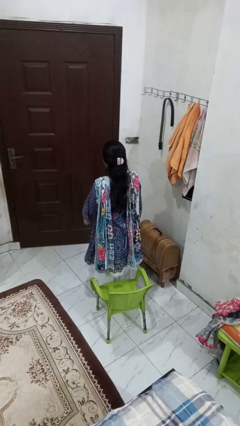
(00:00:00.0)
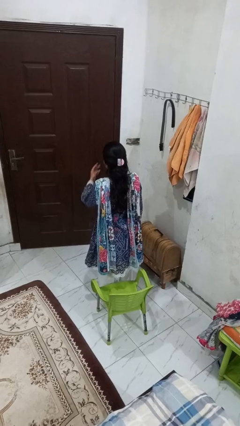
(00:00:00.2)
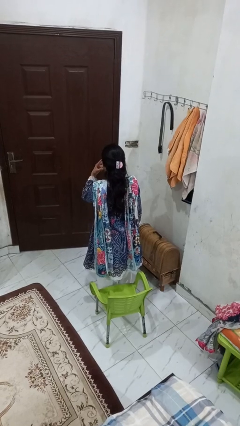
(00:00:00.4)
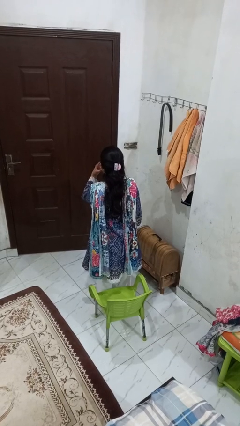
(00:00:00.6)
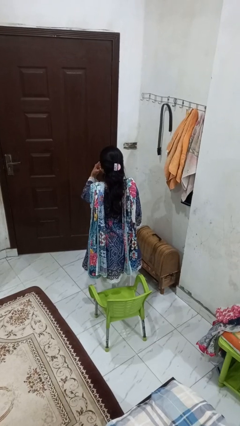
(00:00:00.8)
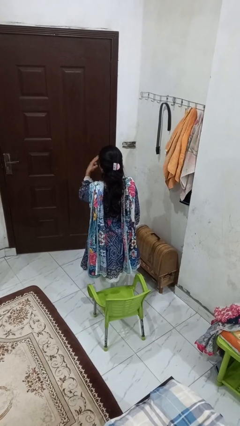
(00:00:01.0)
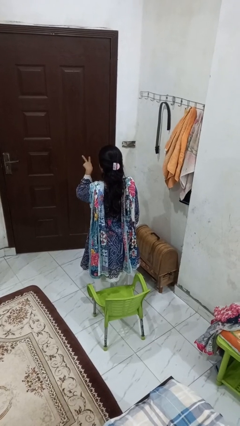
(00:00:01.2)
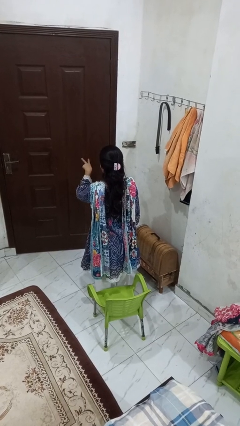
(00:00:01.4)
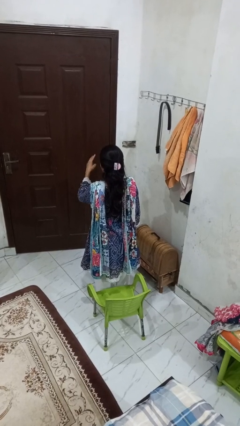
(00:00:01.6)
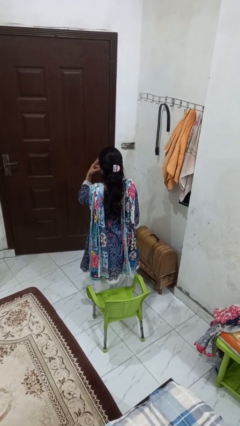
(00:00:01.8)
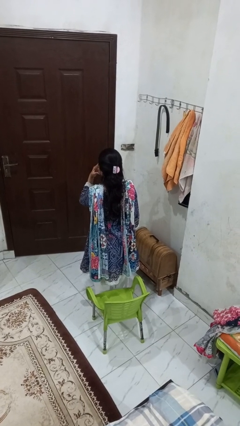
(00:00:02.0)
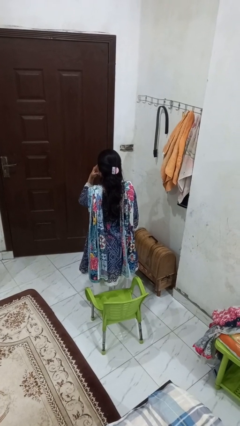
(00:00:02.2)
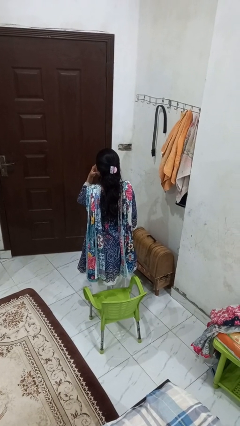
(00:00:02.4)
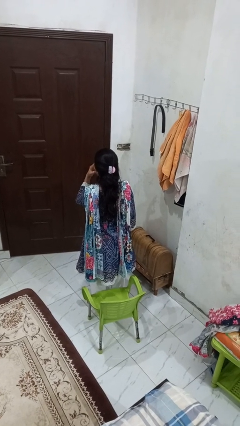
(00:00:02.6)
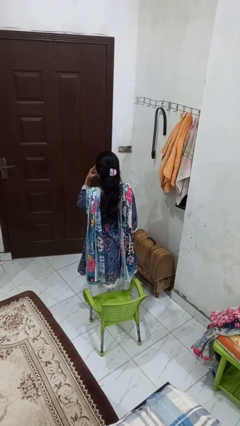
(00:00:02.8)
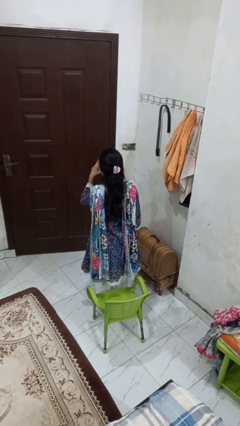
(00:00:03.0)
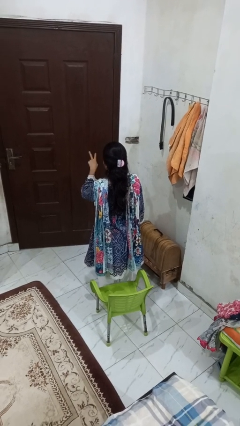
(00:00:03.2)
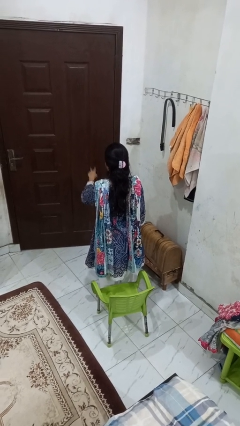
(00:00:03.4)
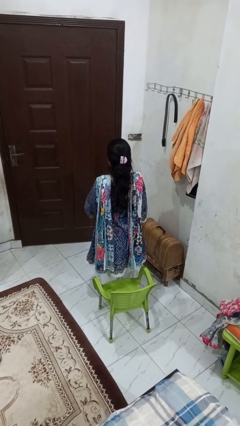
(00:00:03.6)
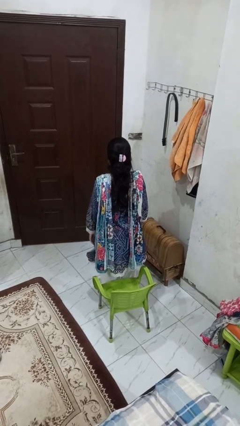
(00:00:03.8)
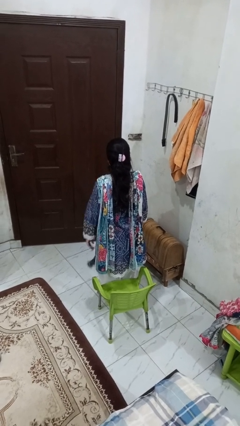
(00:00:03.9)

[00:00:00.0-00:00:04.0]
person gestures watch closely

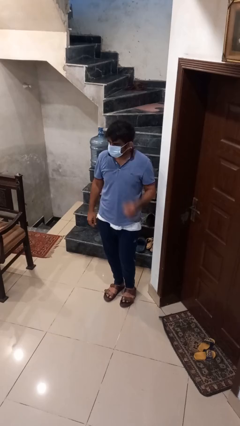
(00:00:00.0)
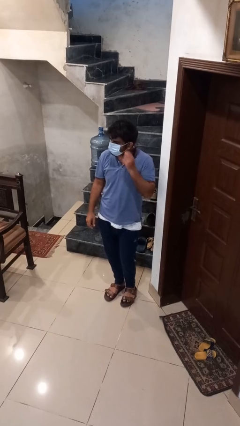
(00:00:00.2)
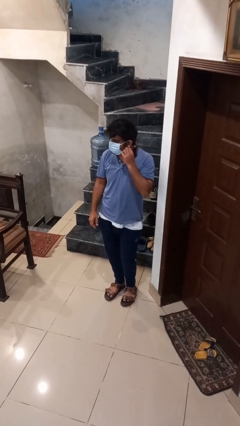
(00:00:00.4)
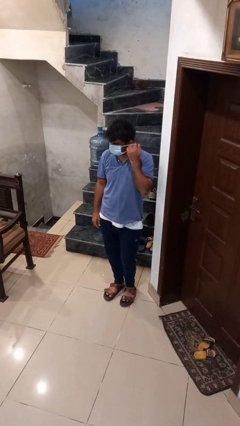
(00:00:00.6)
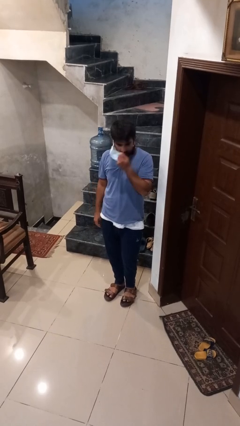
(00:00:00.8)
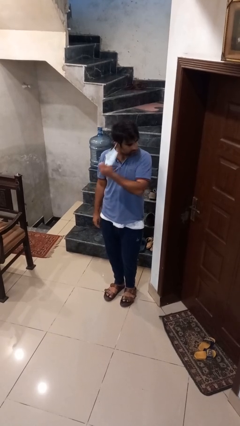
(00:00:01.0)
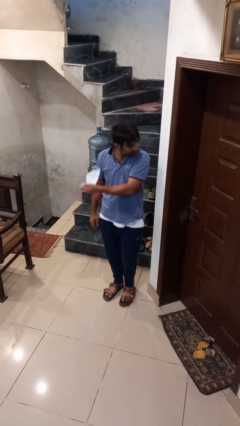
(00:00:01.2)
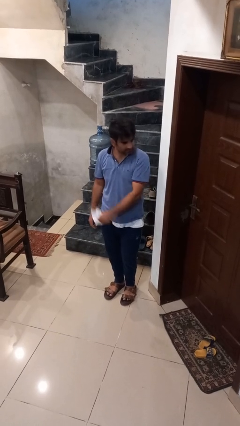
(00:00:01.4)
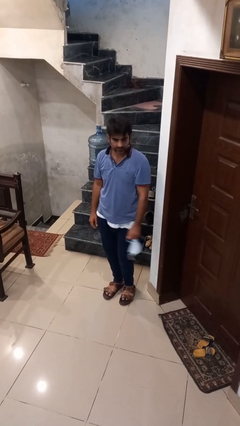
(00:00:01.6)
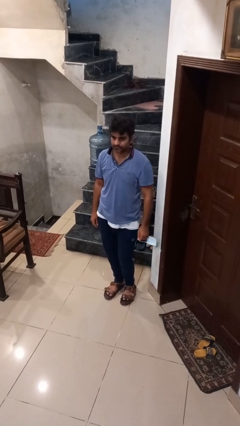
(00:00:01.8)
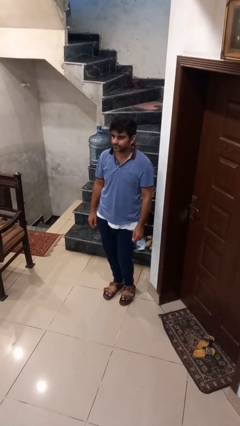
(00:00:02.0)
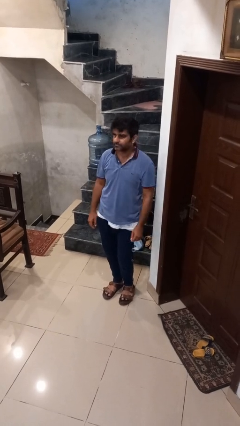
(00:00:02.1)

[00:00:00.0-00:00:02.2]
person takes off facemask

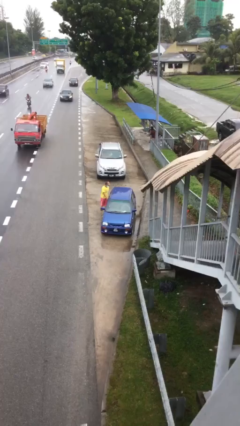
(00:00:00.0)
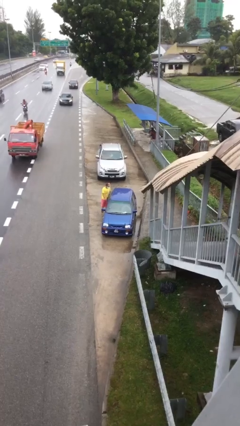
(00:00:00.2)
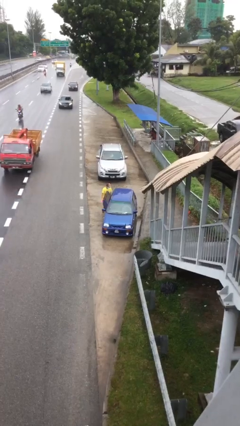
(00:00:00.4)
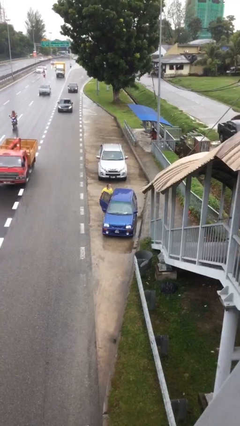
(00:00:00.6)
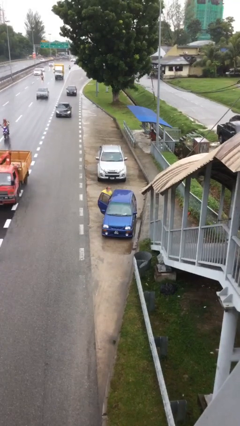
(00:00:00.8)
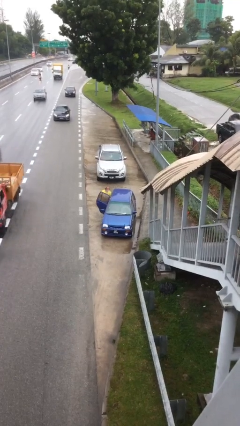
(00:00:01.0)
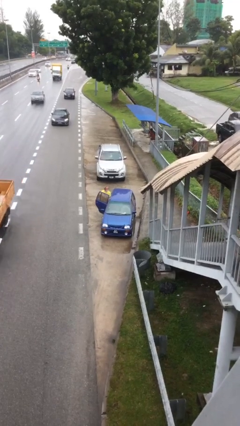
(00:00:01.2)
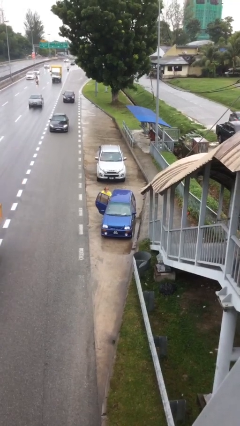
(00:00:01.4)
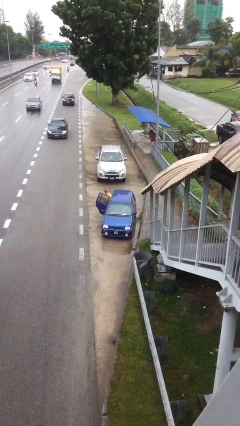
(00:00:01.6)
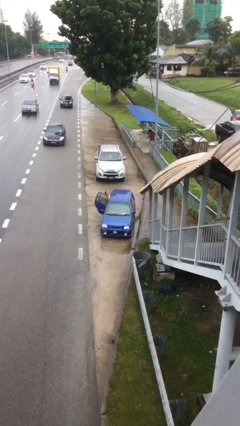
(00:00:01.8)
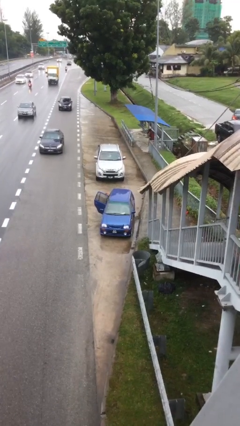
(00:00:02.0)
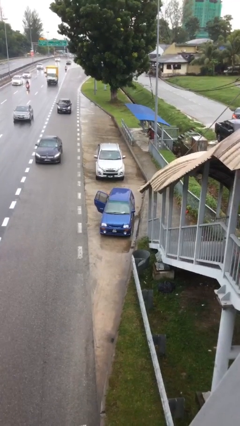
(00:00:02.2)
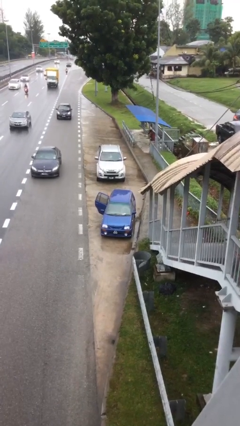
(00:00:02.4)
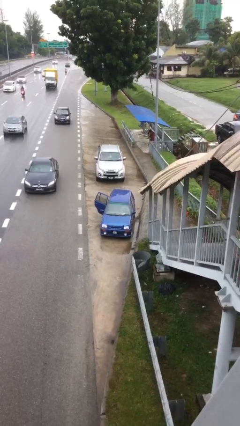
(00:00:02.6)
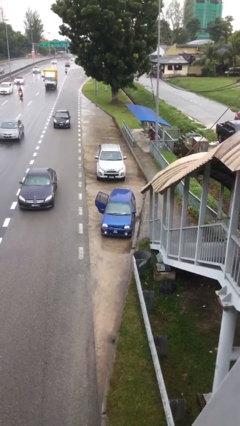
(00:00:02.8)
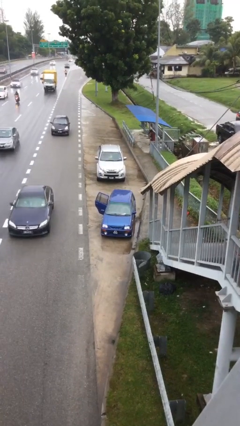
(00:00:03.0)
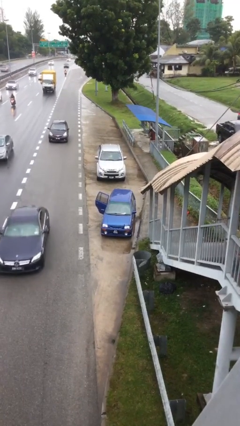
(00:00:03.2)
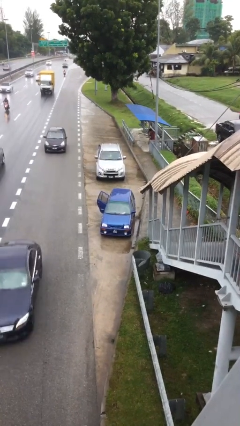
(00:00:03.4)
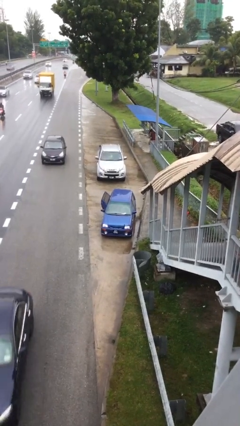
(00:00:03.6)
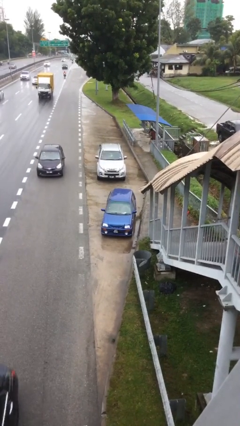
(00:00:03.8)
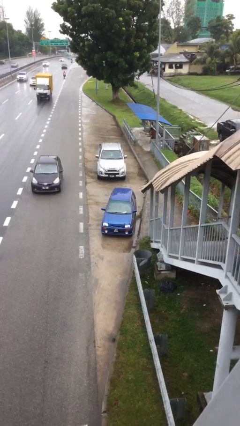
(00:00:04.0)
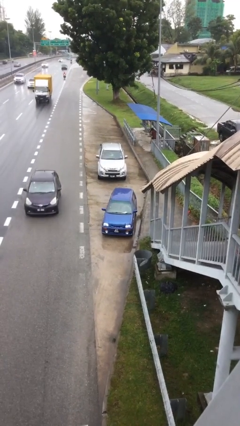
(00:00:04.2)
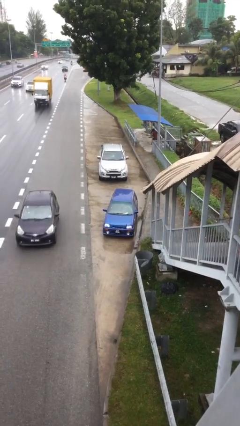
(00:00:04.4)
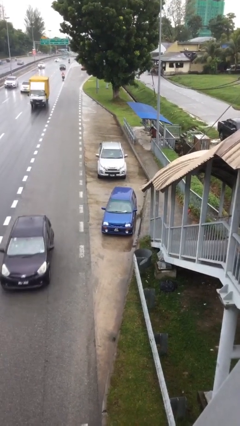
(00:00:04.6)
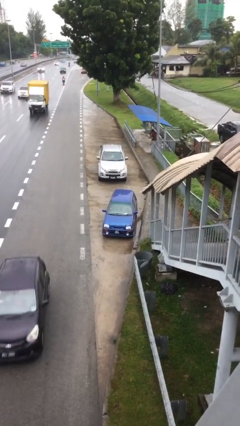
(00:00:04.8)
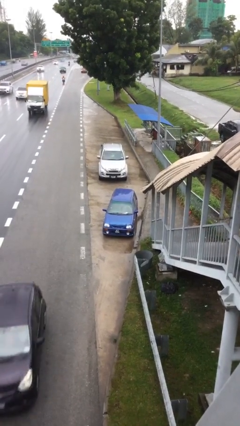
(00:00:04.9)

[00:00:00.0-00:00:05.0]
car picks up person

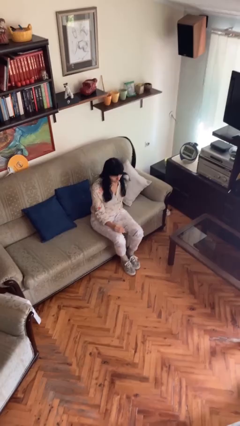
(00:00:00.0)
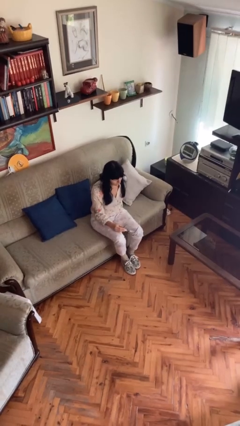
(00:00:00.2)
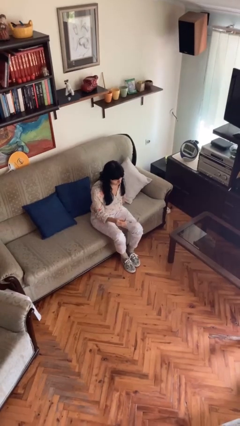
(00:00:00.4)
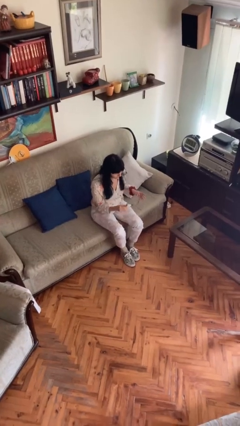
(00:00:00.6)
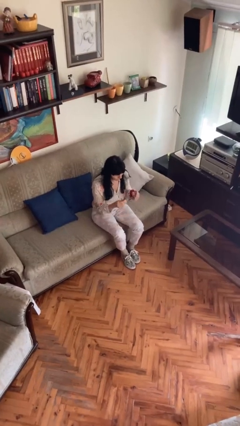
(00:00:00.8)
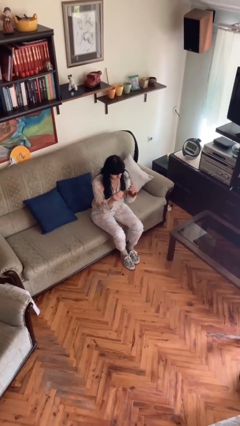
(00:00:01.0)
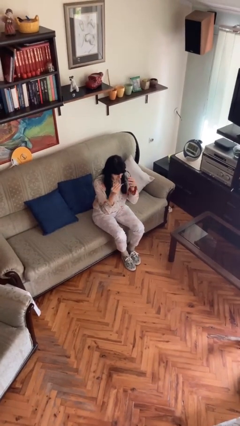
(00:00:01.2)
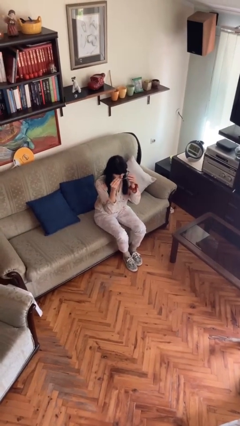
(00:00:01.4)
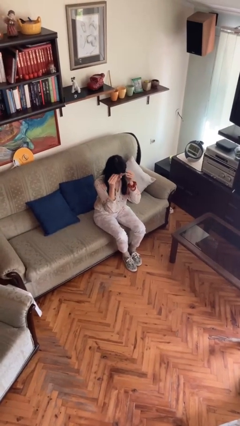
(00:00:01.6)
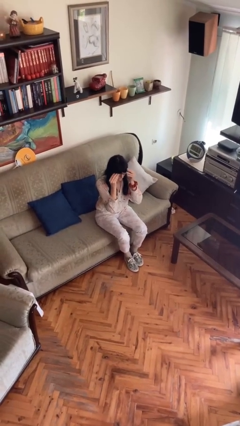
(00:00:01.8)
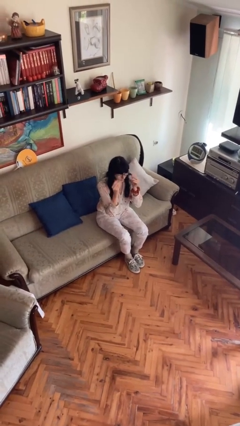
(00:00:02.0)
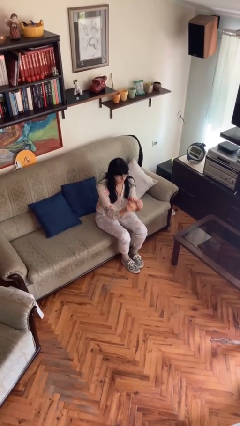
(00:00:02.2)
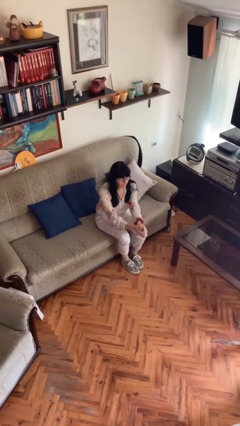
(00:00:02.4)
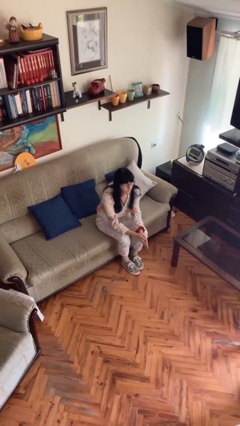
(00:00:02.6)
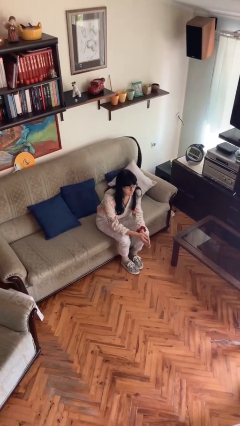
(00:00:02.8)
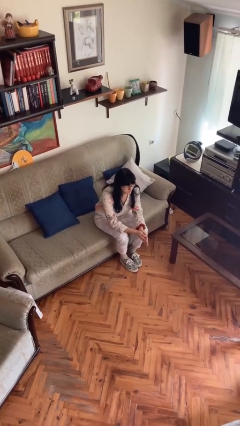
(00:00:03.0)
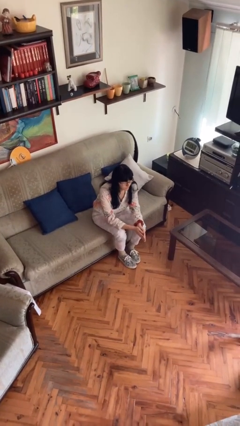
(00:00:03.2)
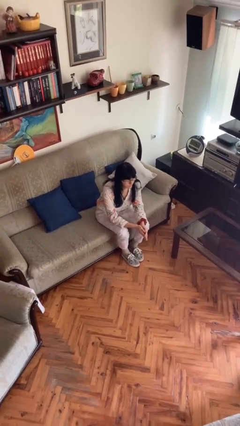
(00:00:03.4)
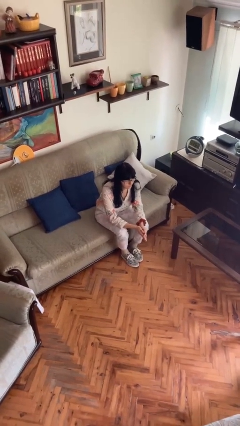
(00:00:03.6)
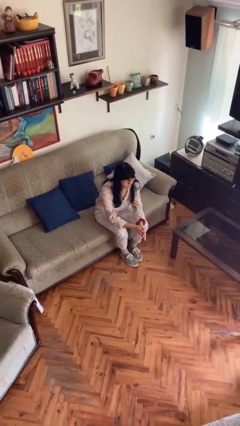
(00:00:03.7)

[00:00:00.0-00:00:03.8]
person puts on glasses

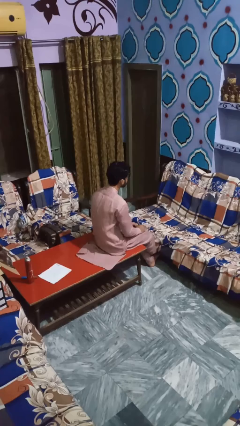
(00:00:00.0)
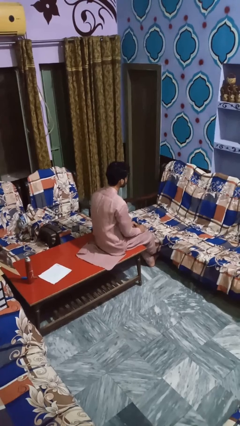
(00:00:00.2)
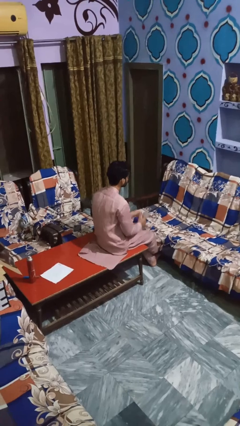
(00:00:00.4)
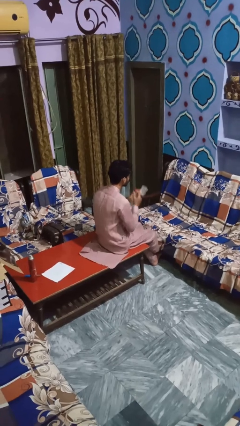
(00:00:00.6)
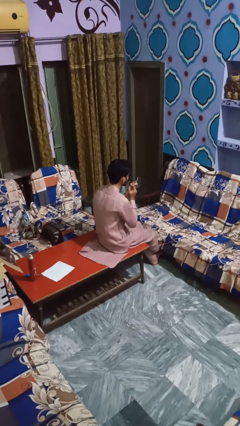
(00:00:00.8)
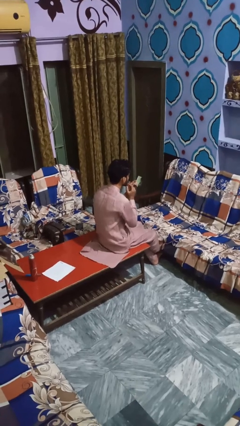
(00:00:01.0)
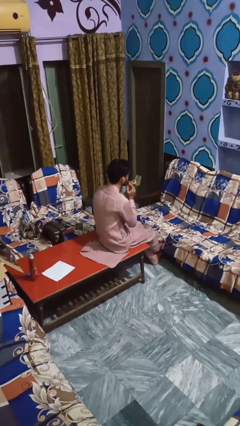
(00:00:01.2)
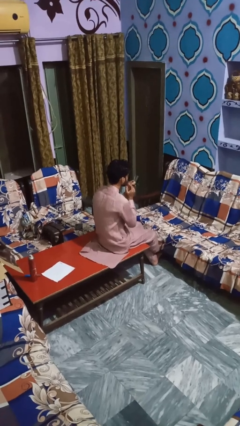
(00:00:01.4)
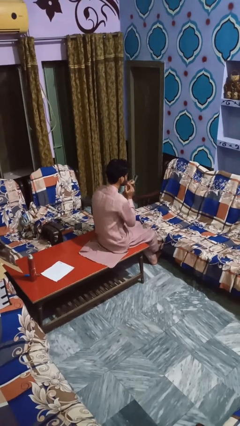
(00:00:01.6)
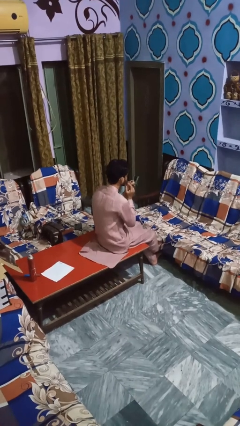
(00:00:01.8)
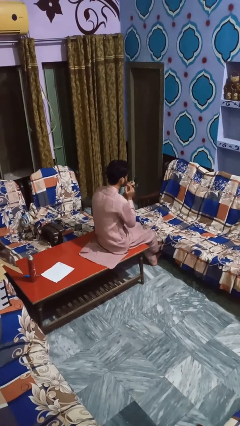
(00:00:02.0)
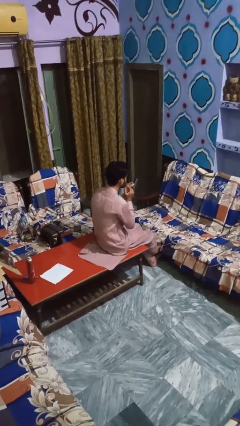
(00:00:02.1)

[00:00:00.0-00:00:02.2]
person applies lip makeup
